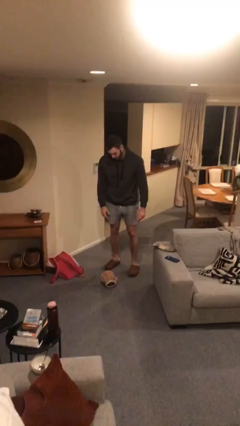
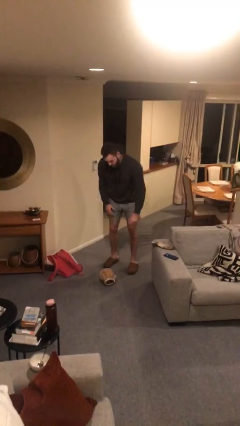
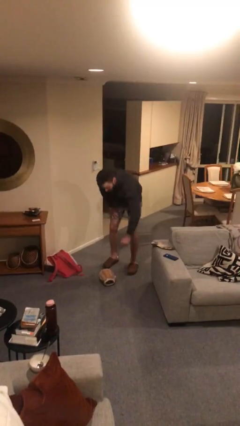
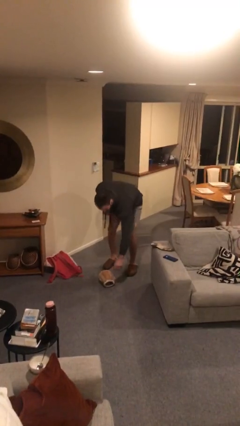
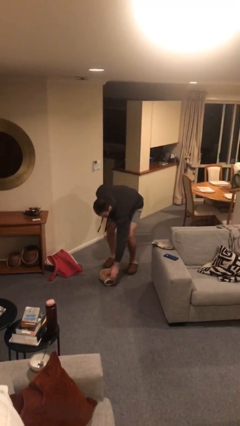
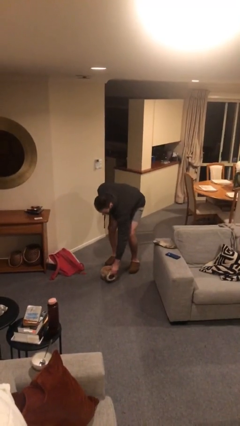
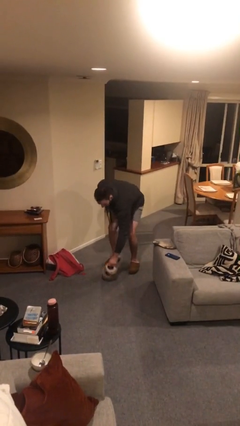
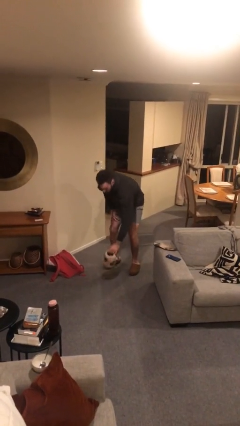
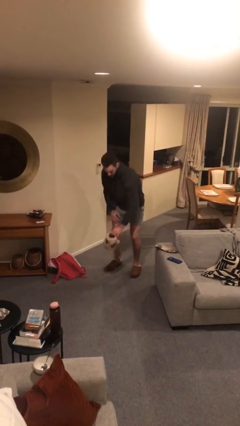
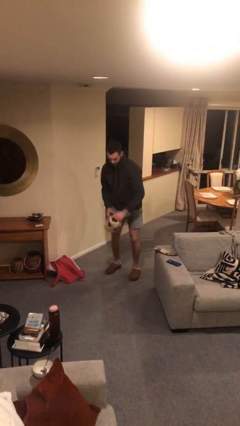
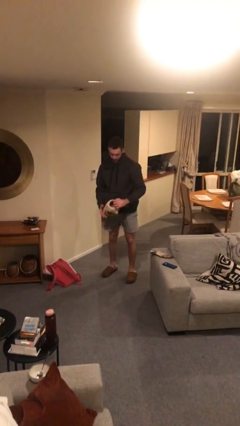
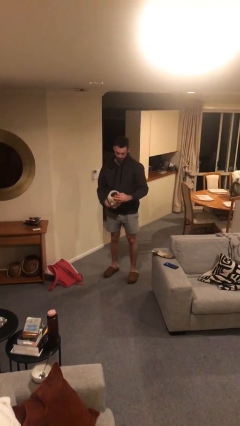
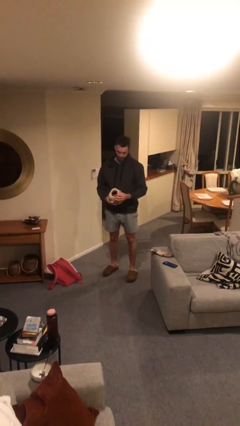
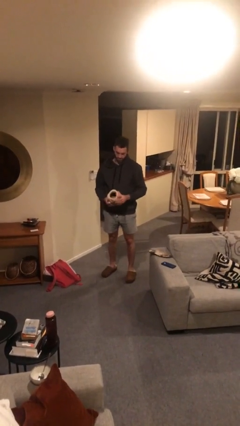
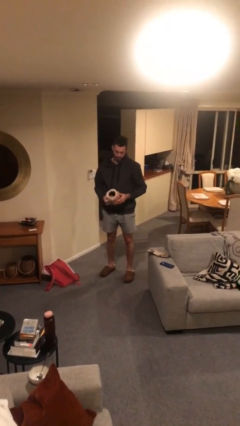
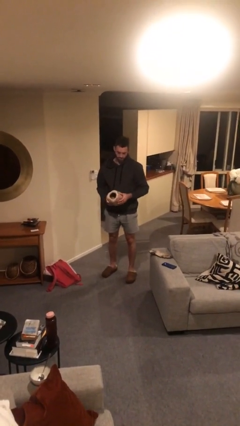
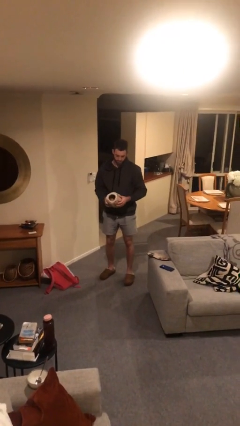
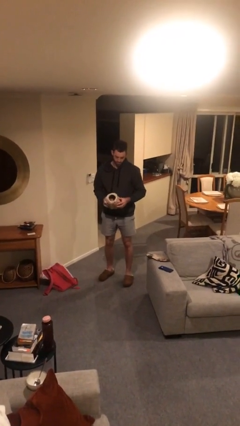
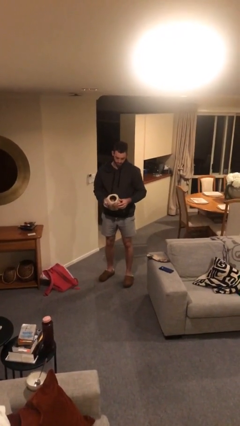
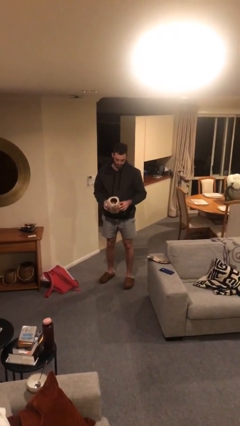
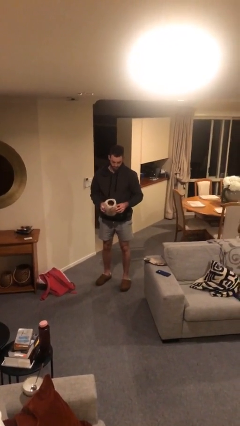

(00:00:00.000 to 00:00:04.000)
person picks up object from floor

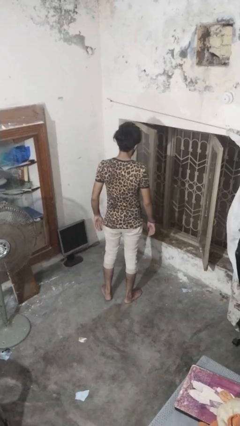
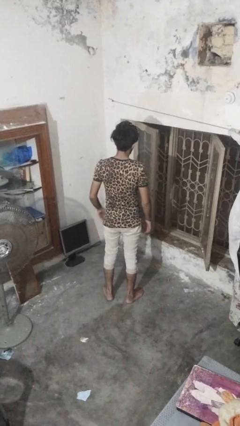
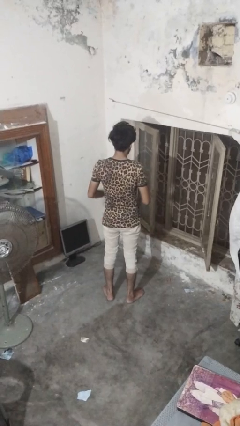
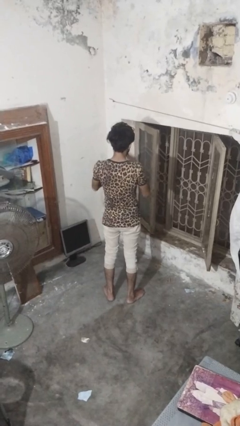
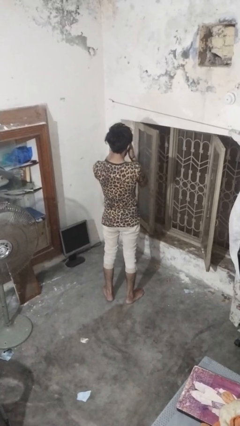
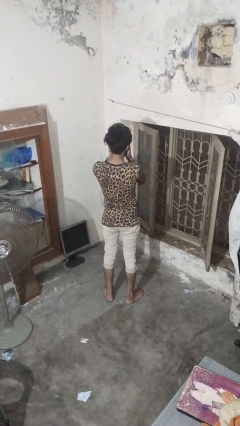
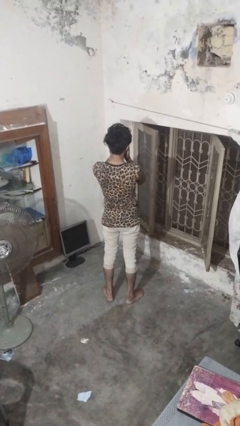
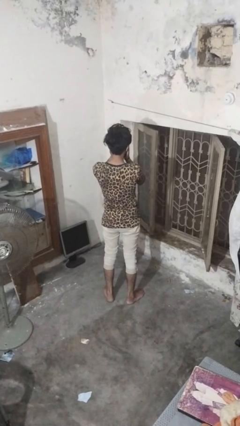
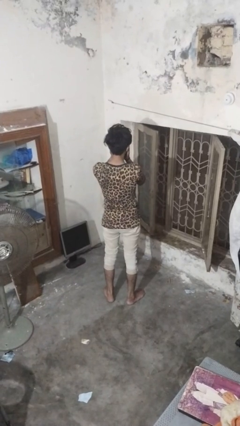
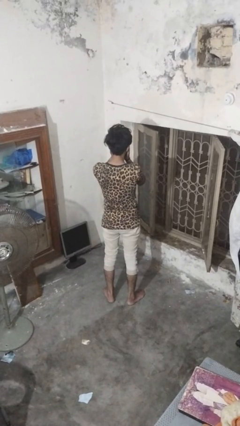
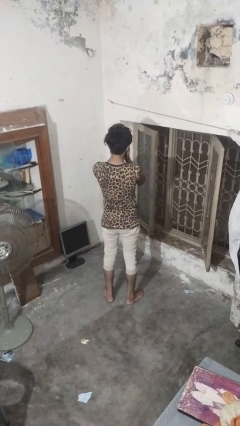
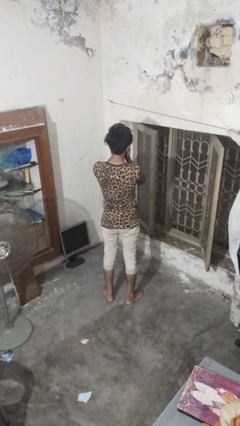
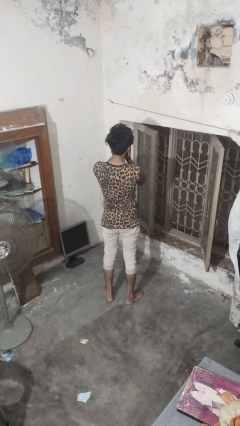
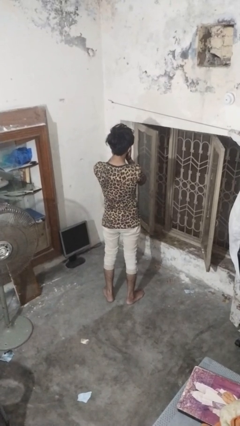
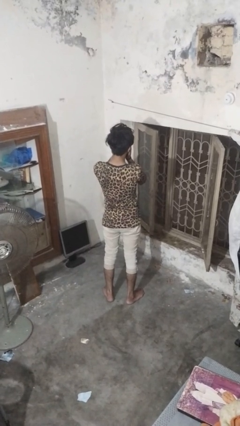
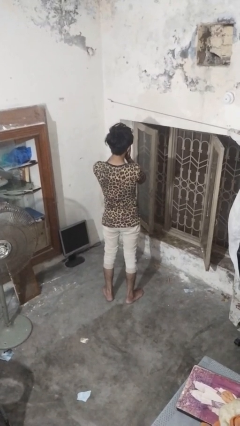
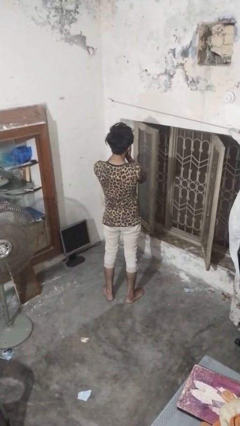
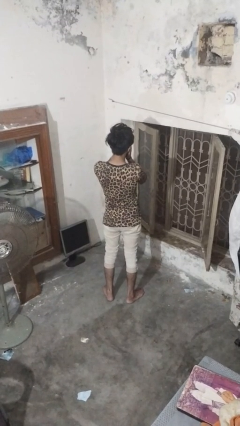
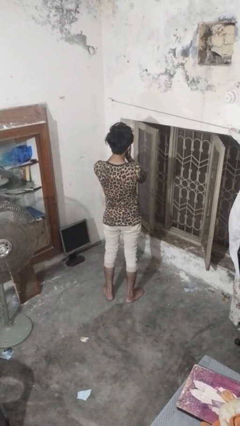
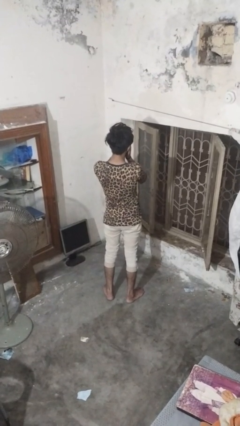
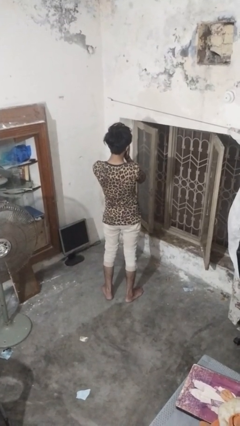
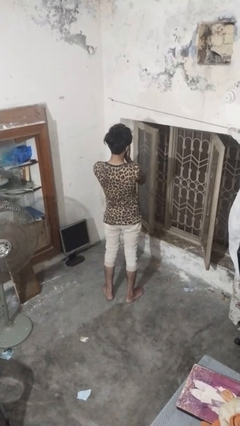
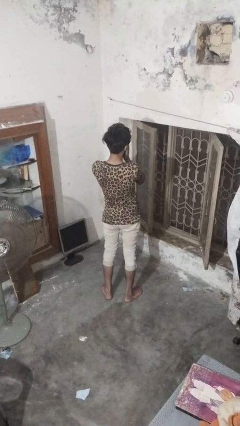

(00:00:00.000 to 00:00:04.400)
person covers face with hands

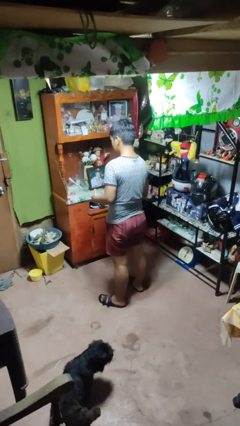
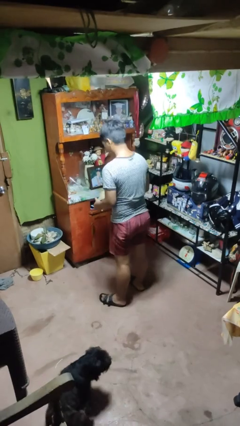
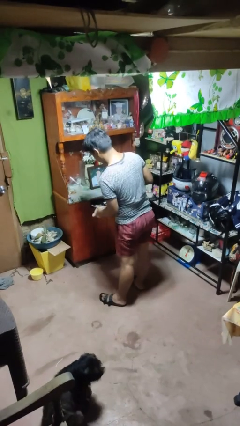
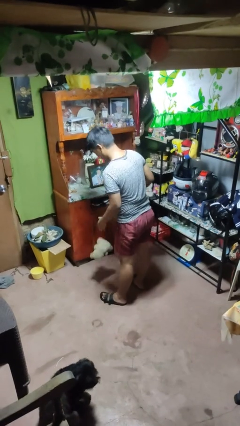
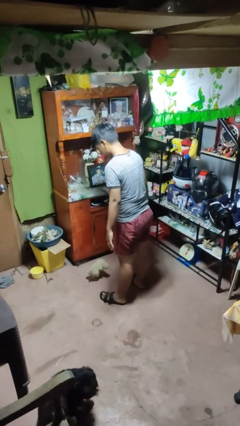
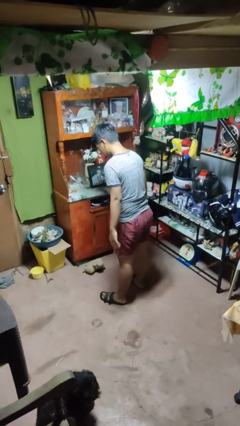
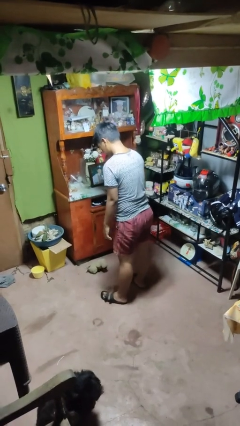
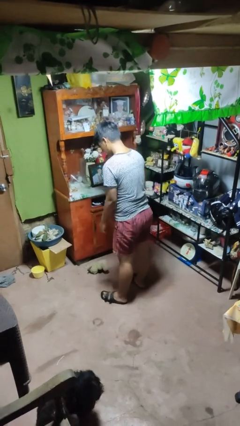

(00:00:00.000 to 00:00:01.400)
person drops object

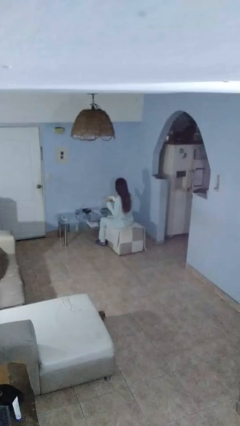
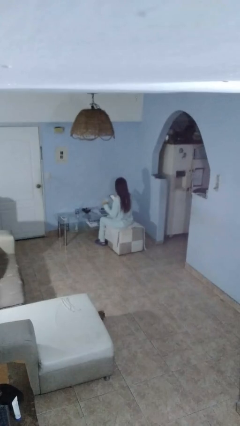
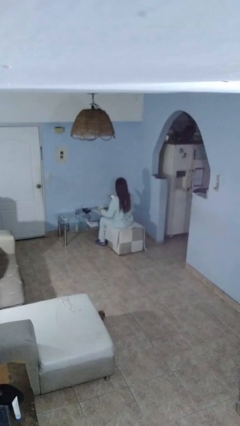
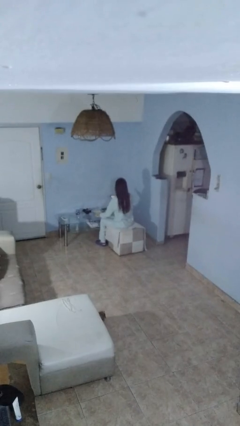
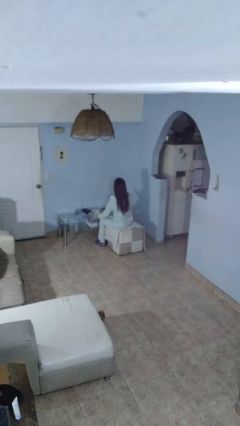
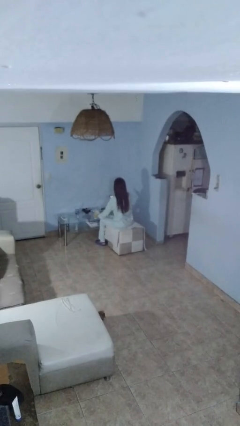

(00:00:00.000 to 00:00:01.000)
person puts down object on table

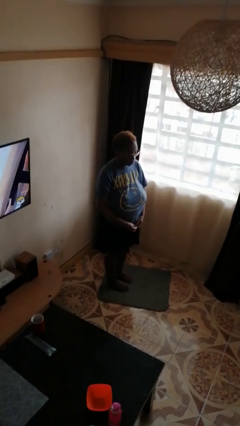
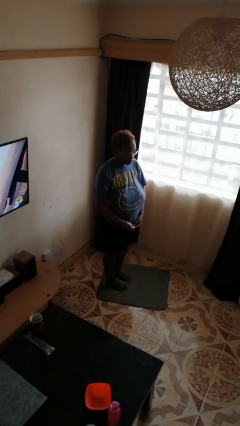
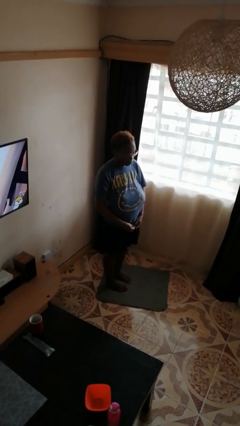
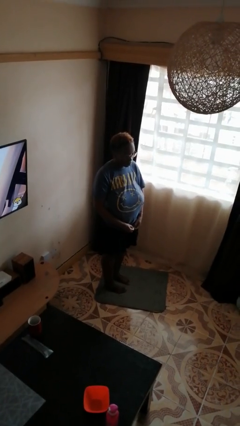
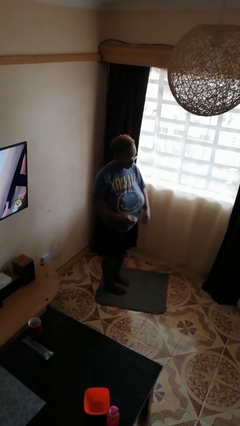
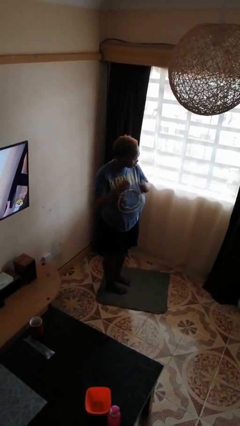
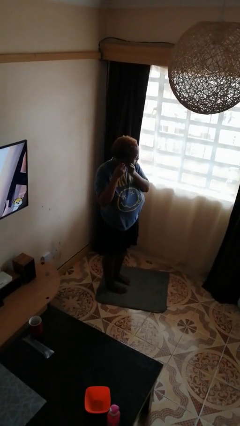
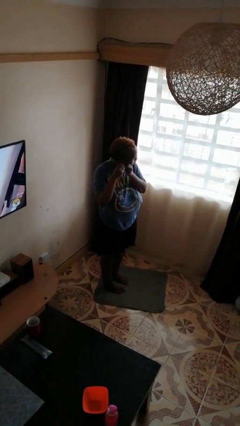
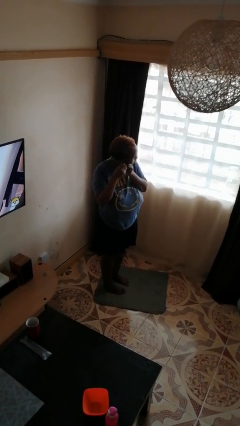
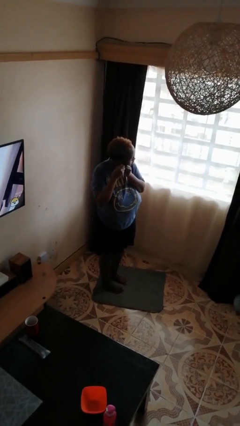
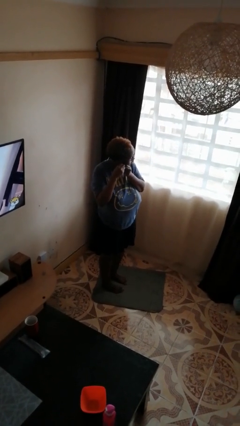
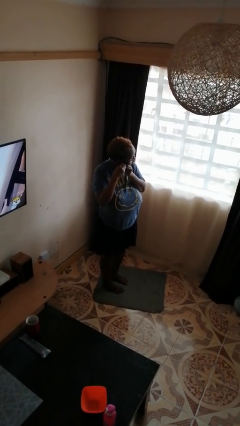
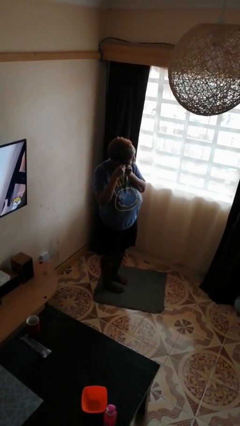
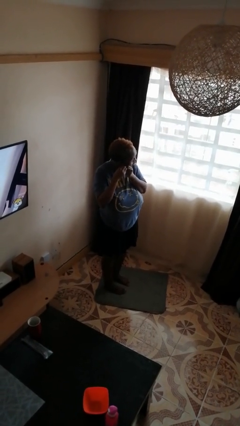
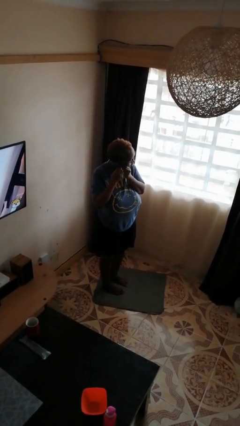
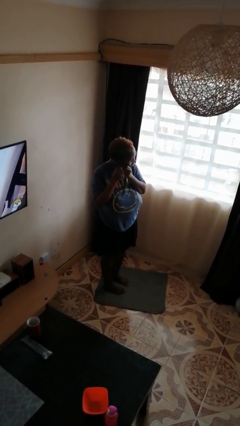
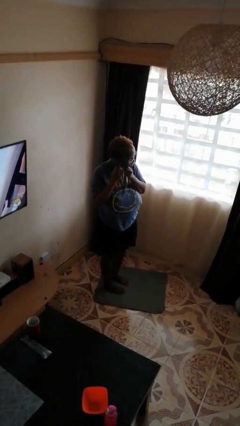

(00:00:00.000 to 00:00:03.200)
person puts on earrings

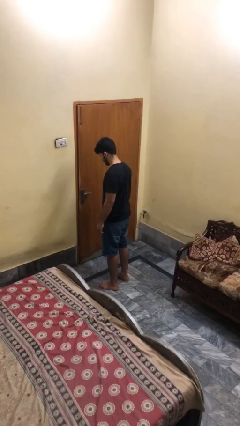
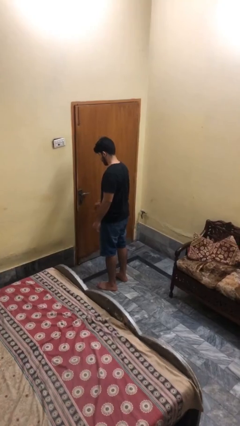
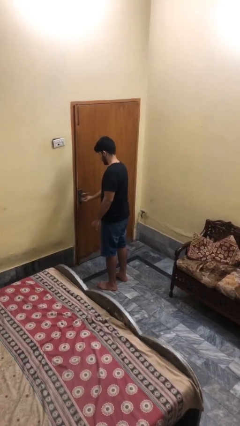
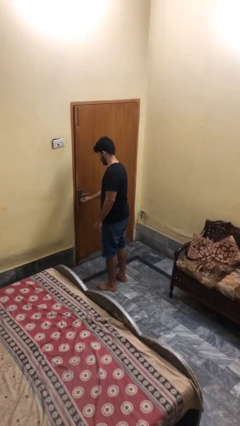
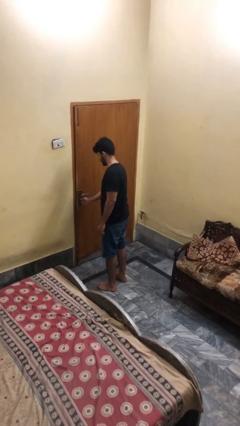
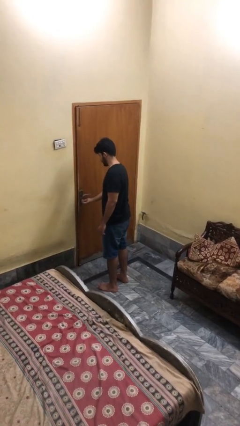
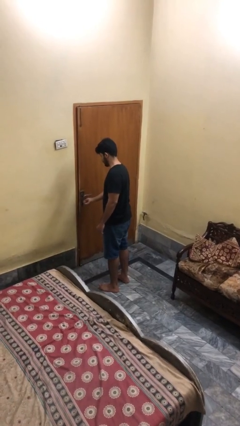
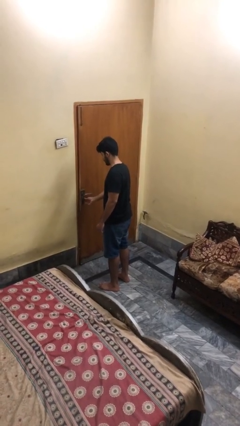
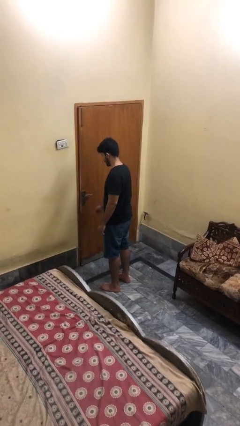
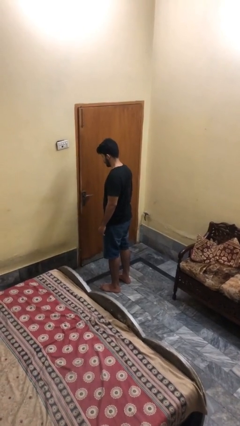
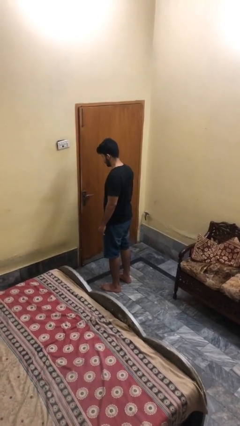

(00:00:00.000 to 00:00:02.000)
person locks door with keys

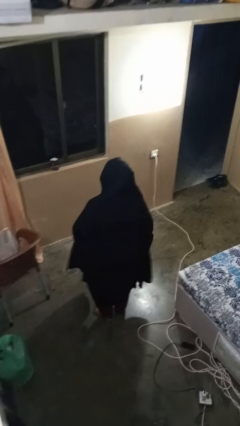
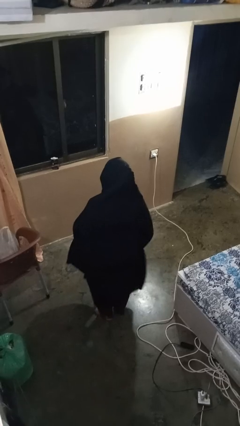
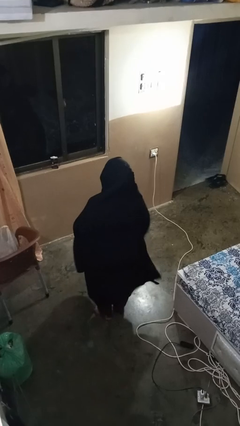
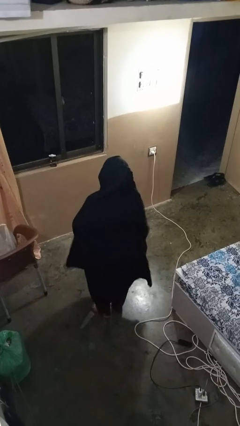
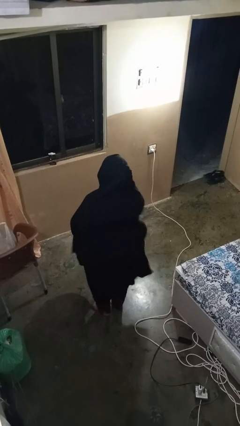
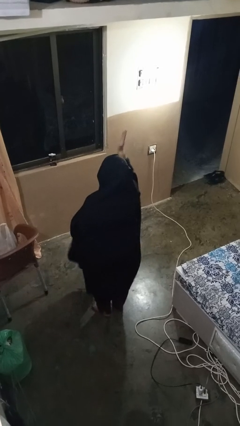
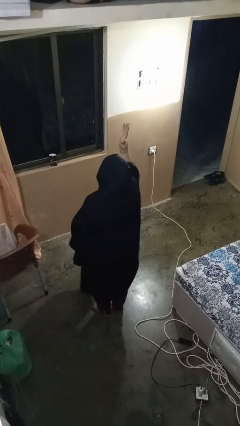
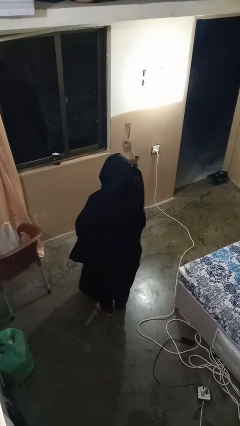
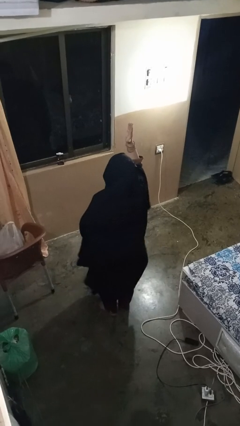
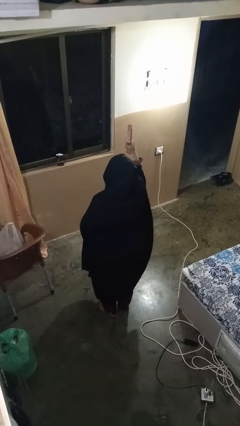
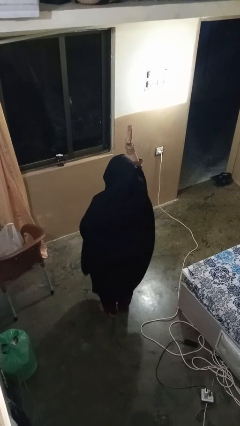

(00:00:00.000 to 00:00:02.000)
person gestures raise hand
